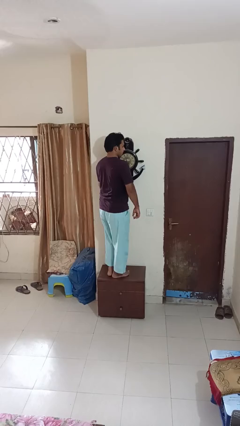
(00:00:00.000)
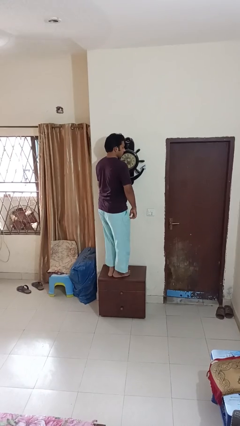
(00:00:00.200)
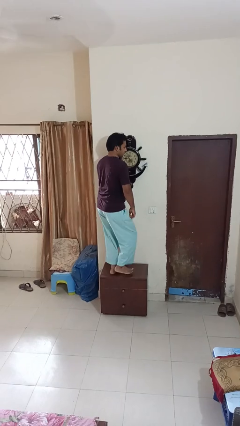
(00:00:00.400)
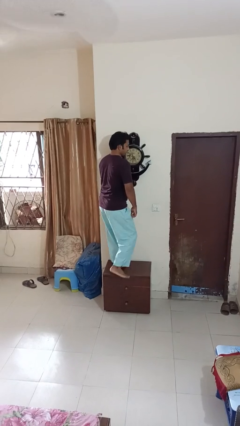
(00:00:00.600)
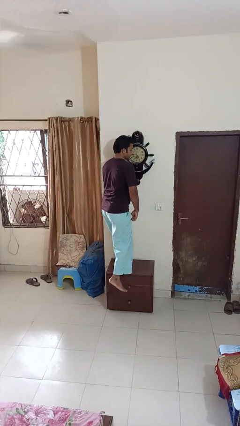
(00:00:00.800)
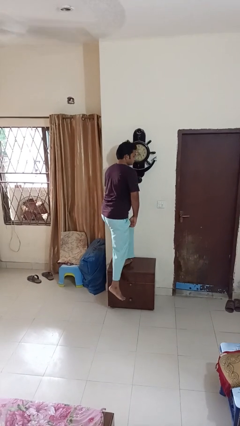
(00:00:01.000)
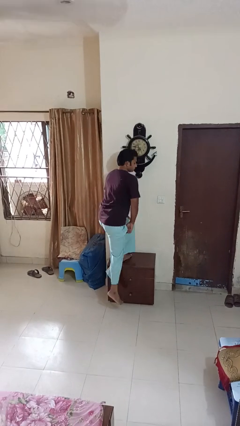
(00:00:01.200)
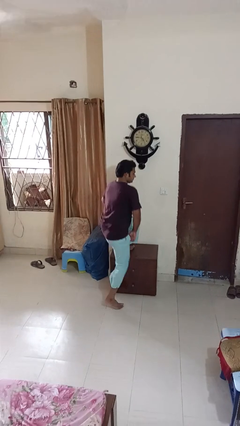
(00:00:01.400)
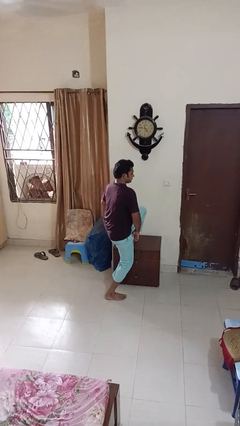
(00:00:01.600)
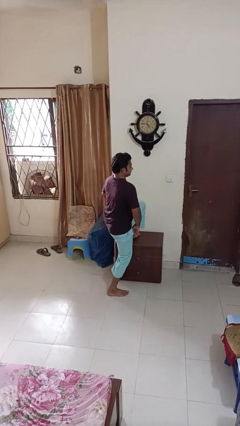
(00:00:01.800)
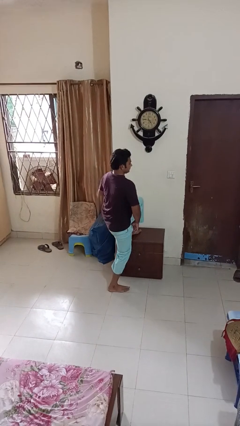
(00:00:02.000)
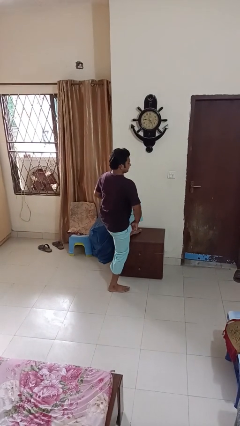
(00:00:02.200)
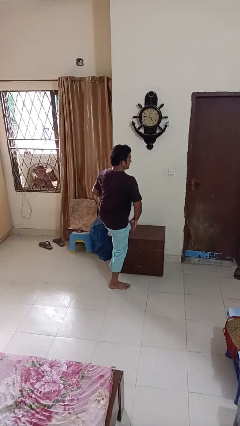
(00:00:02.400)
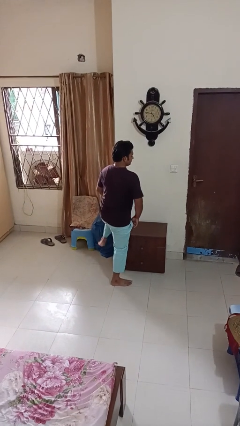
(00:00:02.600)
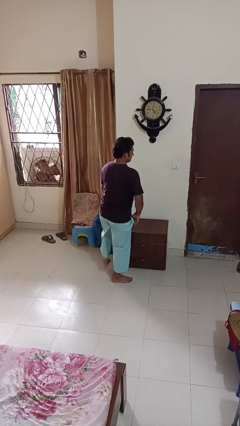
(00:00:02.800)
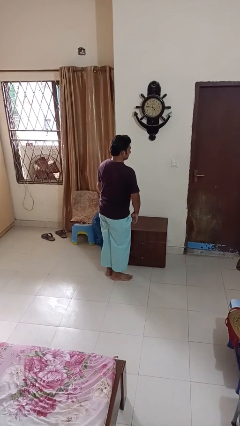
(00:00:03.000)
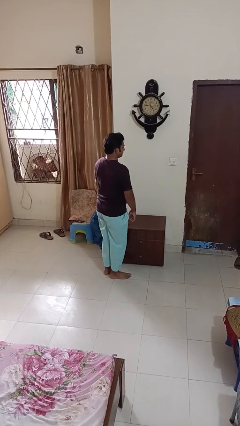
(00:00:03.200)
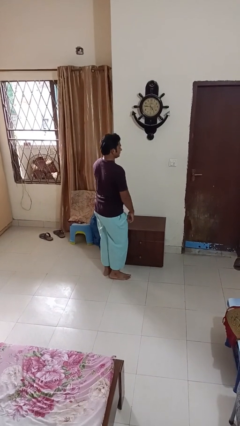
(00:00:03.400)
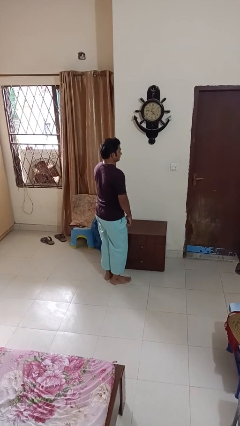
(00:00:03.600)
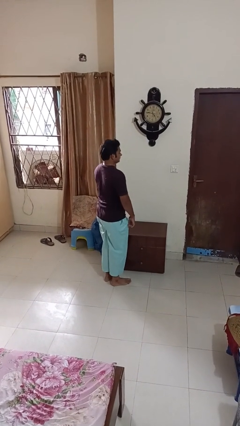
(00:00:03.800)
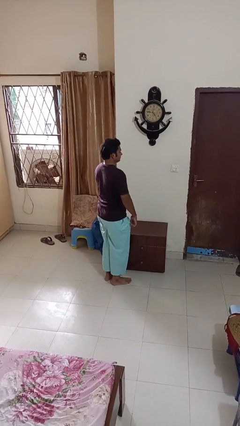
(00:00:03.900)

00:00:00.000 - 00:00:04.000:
person climbs off table

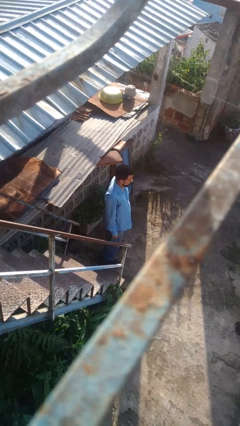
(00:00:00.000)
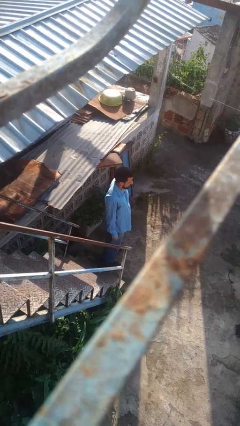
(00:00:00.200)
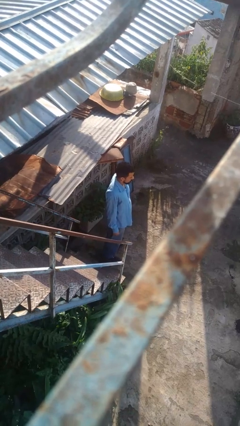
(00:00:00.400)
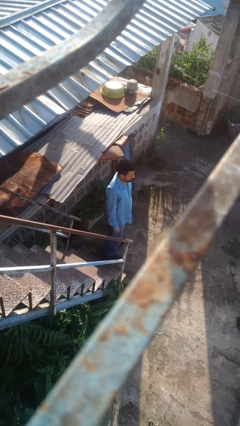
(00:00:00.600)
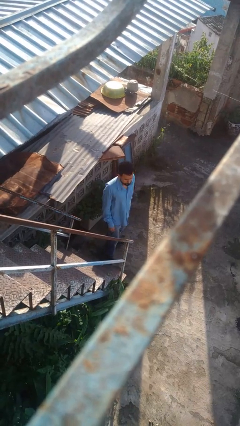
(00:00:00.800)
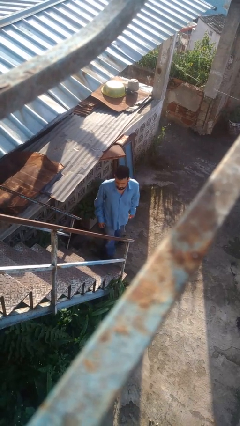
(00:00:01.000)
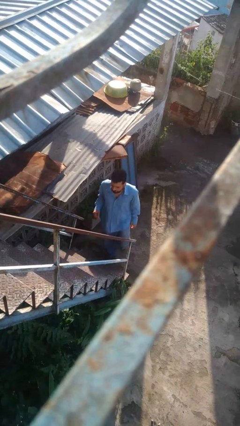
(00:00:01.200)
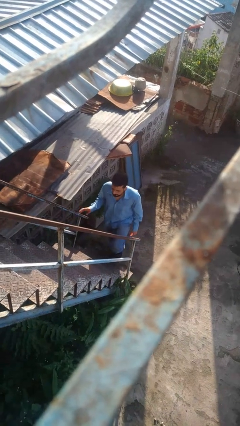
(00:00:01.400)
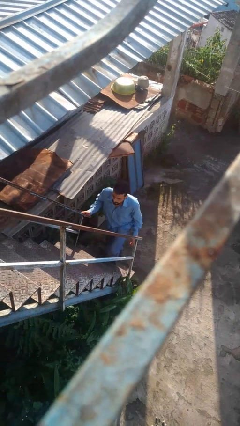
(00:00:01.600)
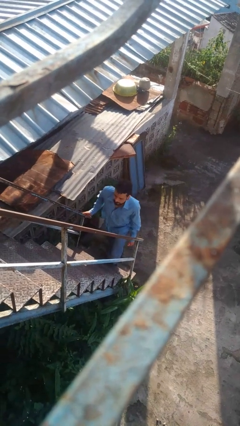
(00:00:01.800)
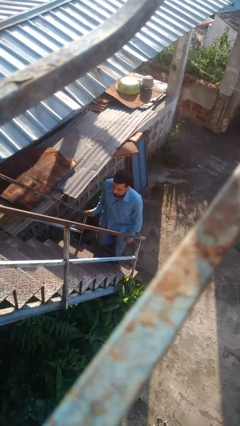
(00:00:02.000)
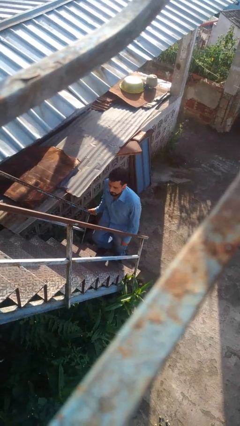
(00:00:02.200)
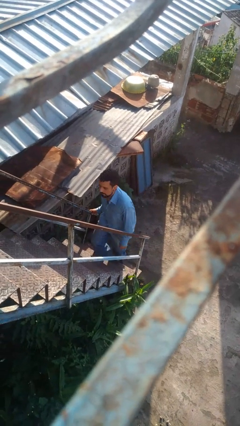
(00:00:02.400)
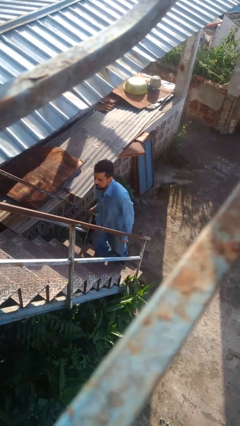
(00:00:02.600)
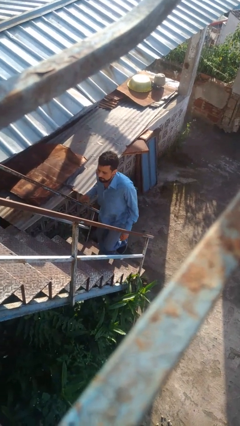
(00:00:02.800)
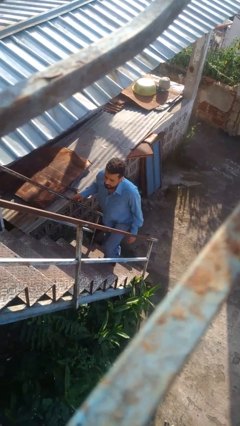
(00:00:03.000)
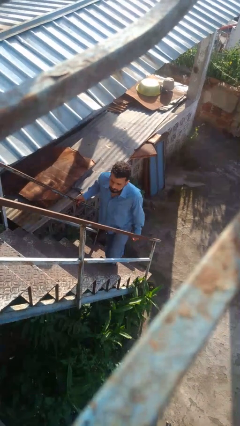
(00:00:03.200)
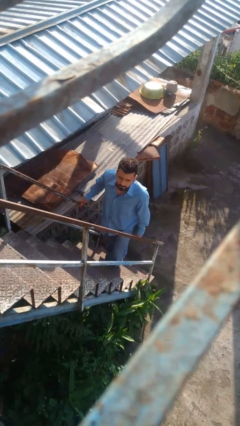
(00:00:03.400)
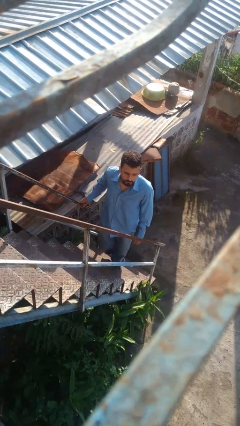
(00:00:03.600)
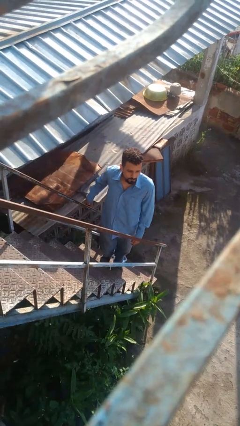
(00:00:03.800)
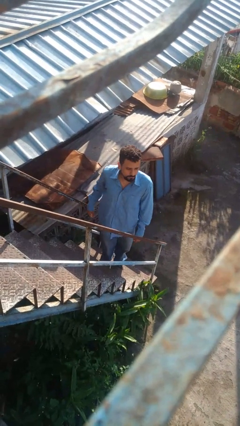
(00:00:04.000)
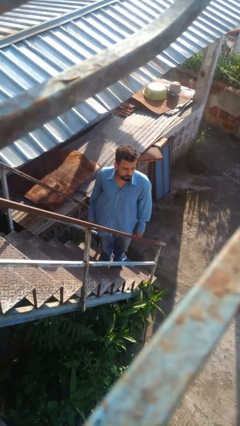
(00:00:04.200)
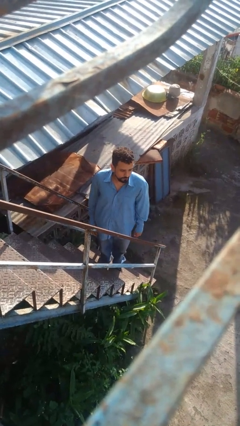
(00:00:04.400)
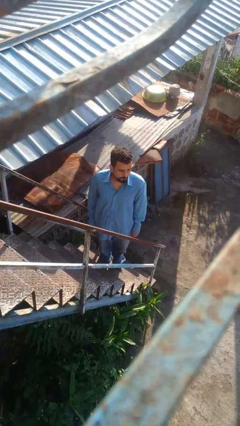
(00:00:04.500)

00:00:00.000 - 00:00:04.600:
person climbs up stairs

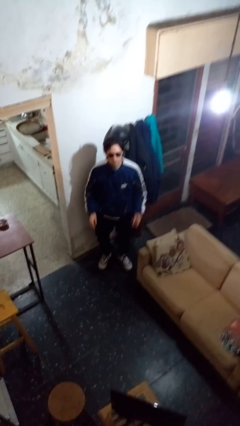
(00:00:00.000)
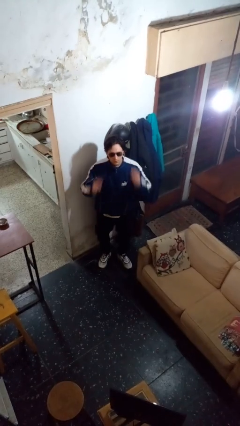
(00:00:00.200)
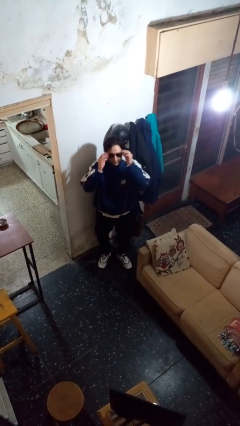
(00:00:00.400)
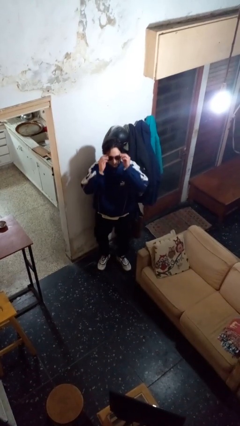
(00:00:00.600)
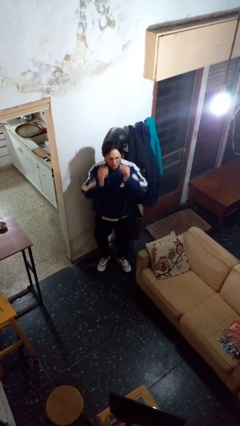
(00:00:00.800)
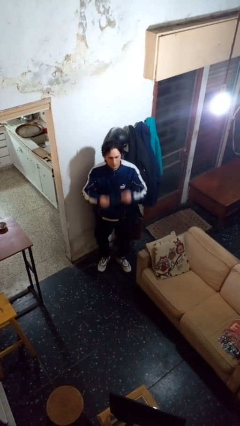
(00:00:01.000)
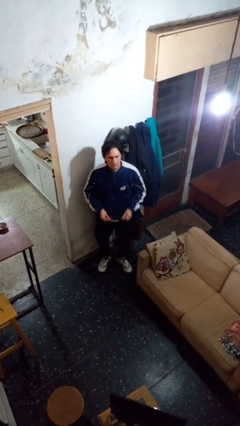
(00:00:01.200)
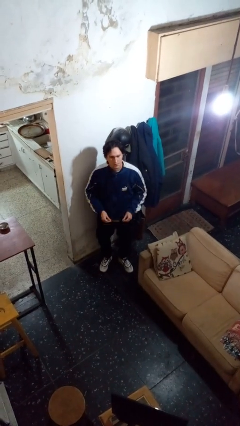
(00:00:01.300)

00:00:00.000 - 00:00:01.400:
person takes off sunglasses

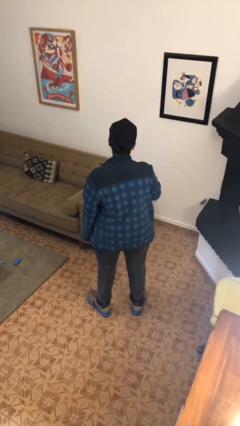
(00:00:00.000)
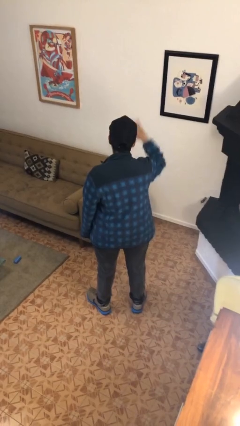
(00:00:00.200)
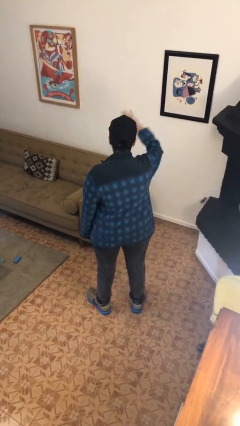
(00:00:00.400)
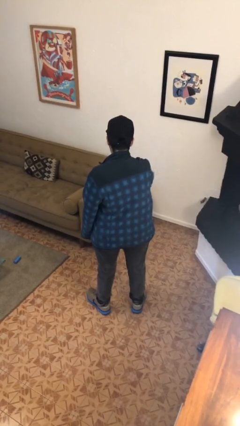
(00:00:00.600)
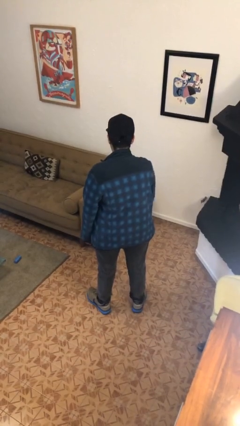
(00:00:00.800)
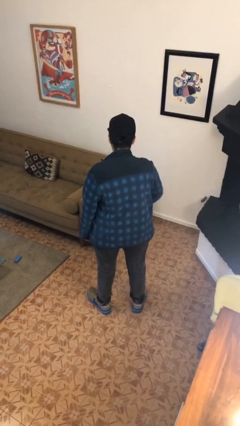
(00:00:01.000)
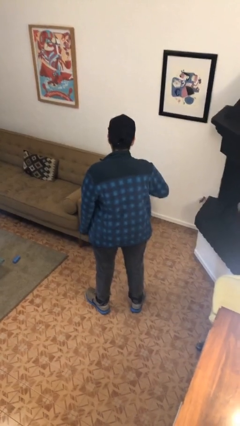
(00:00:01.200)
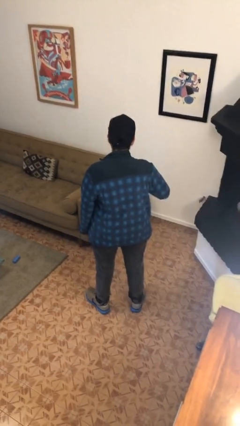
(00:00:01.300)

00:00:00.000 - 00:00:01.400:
person gestures swipe down

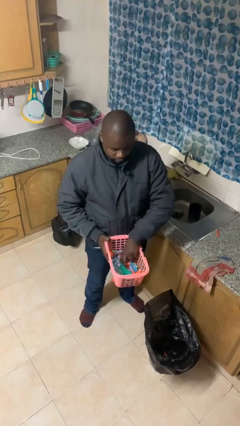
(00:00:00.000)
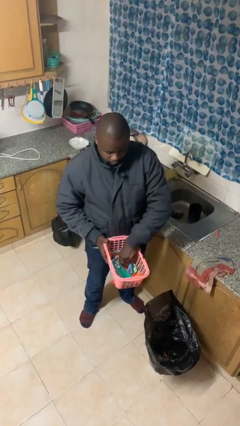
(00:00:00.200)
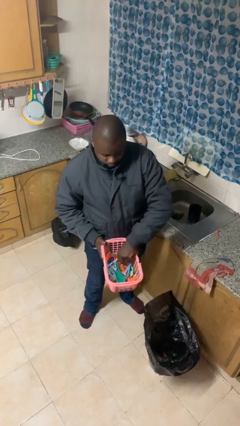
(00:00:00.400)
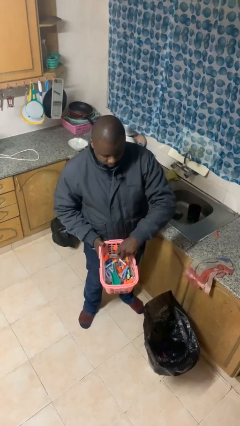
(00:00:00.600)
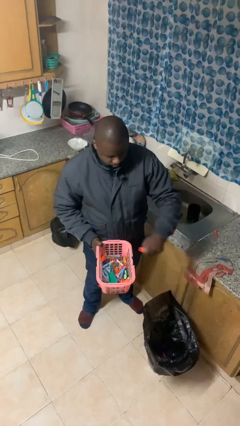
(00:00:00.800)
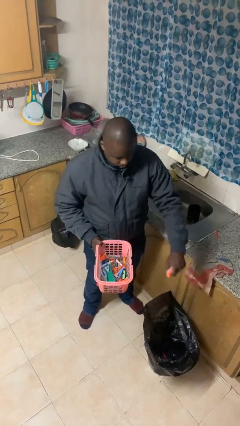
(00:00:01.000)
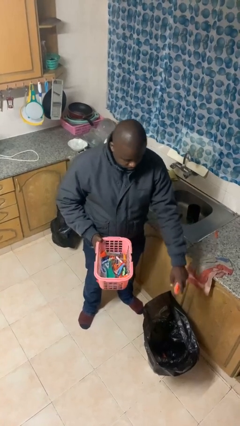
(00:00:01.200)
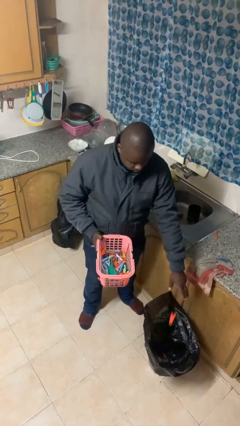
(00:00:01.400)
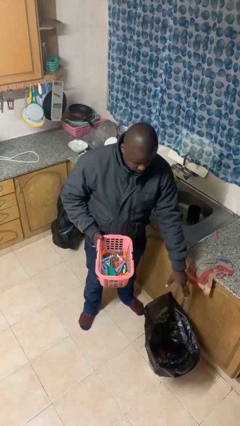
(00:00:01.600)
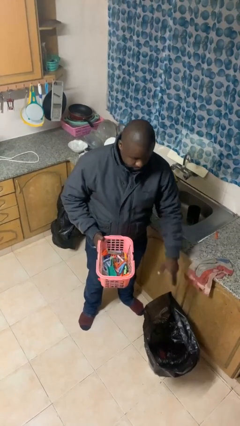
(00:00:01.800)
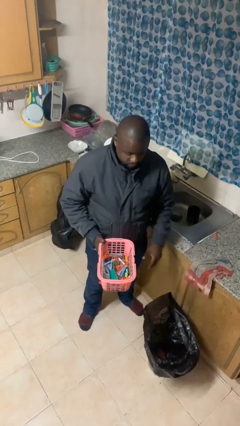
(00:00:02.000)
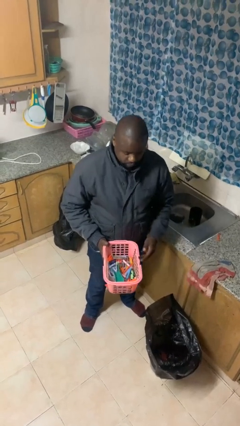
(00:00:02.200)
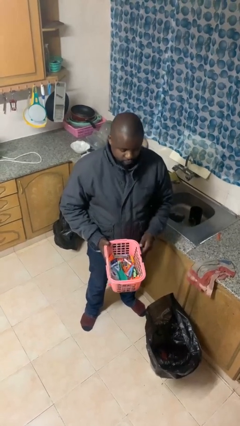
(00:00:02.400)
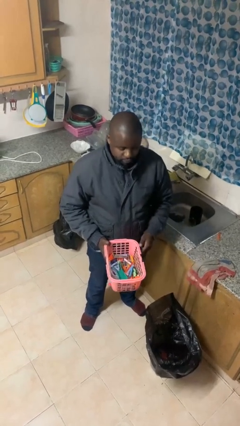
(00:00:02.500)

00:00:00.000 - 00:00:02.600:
person discards trash

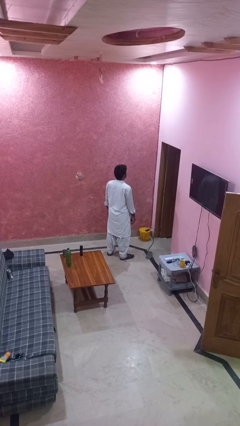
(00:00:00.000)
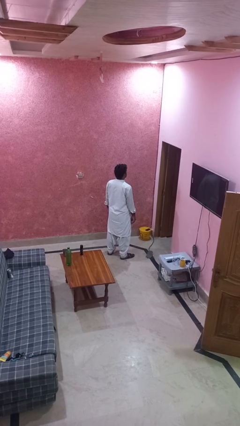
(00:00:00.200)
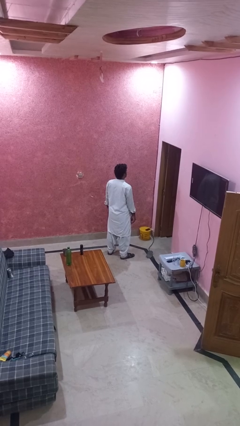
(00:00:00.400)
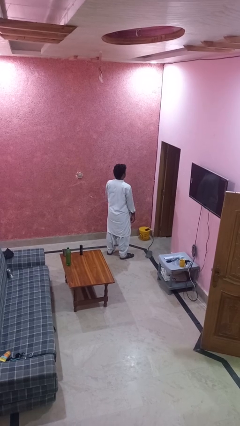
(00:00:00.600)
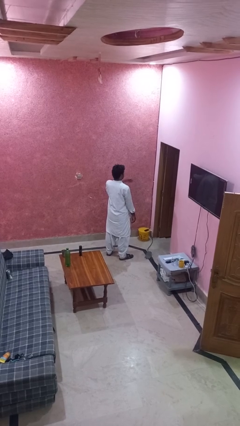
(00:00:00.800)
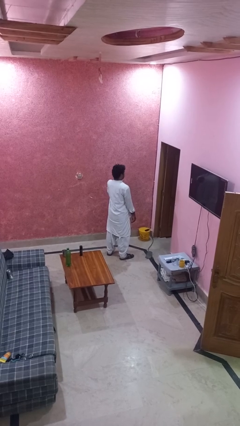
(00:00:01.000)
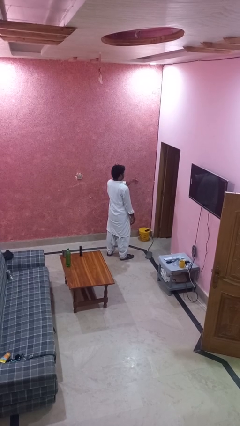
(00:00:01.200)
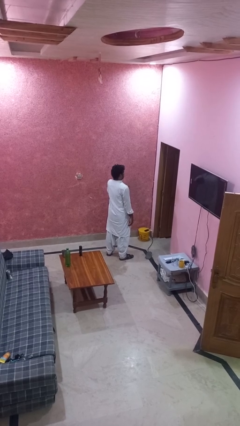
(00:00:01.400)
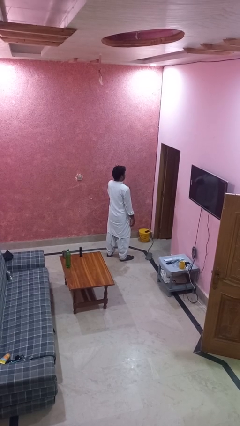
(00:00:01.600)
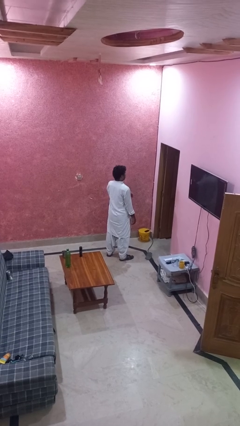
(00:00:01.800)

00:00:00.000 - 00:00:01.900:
person drums on chest

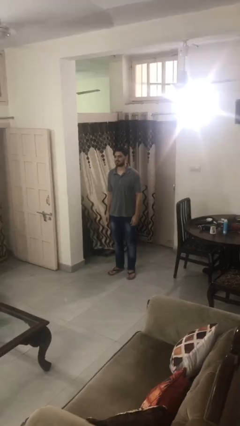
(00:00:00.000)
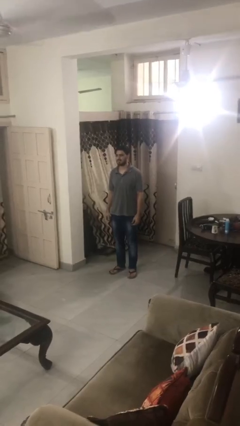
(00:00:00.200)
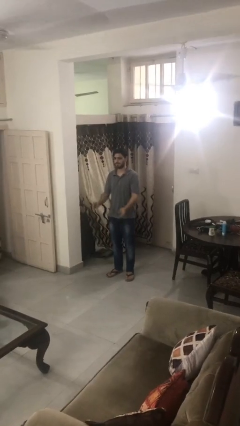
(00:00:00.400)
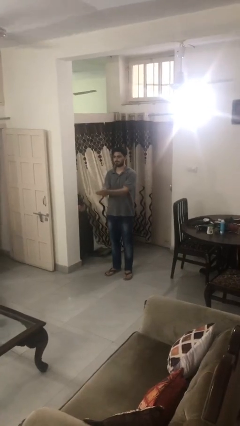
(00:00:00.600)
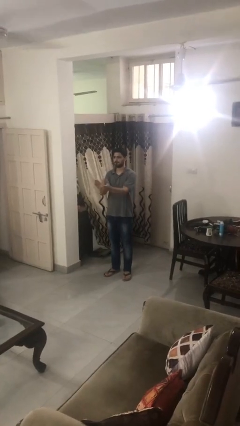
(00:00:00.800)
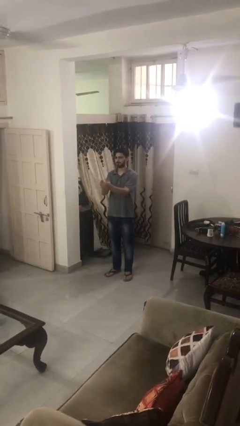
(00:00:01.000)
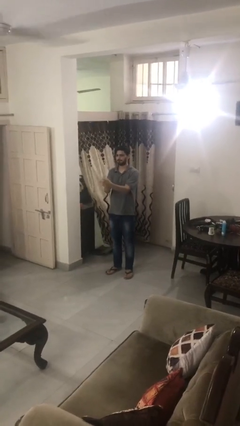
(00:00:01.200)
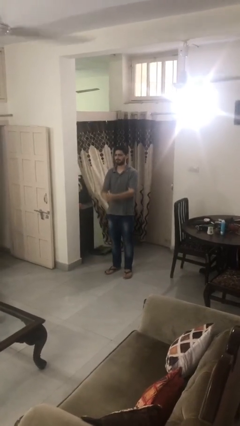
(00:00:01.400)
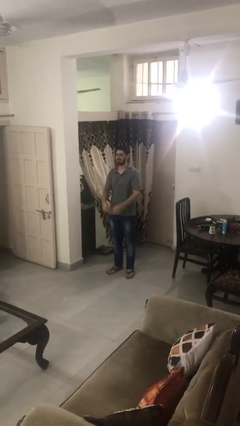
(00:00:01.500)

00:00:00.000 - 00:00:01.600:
person claps hands
